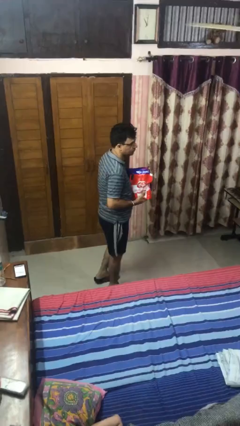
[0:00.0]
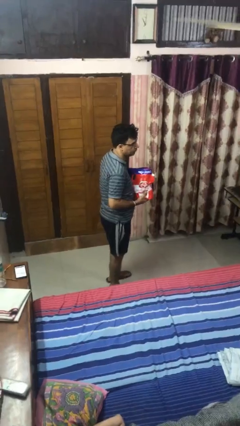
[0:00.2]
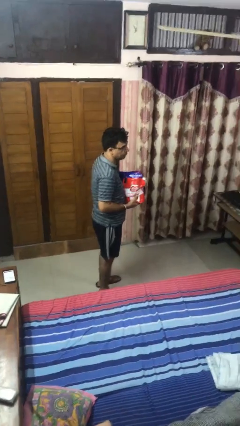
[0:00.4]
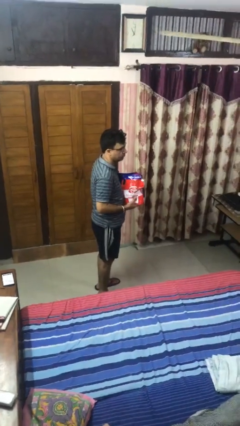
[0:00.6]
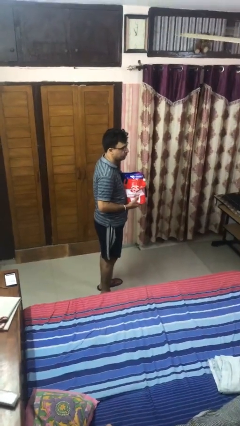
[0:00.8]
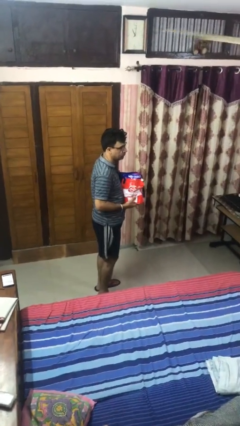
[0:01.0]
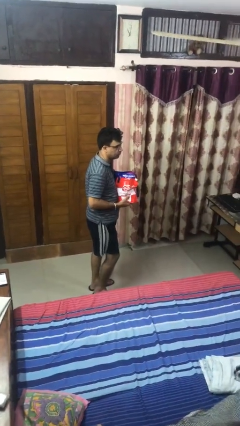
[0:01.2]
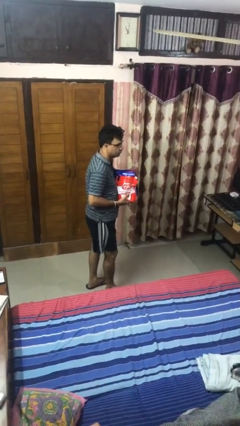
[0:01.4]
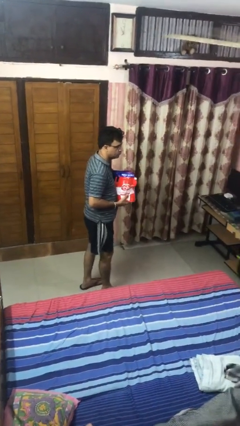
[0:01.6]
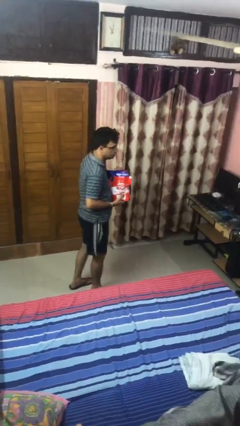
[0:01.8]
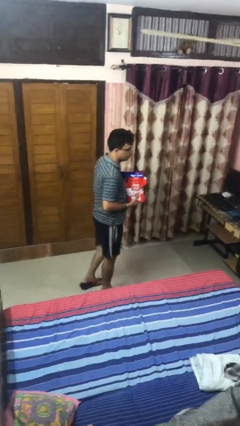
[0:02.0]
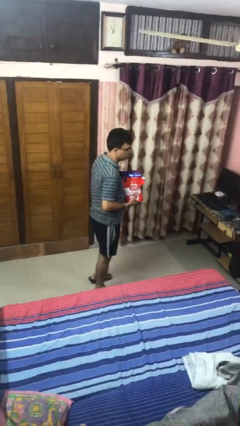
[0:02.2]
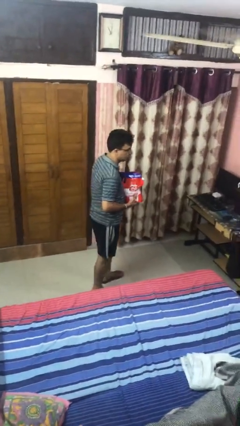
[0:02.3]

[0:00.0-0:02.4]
person carries groceries

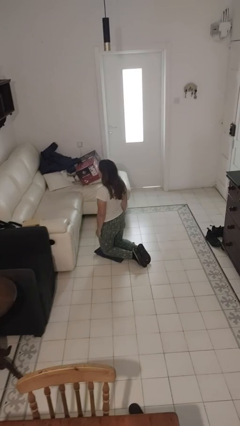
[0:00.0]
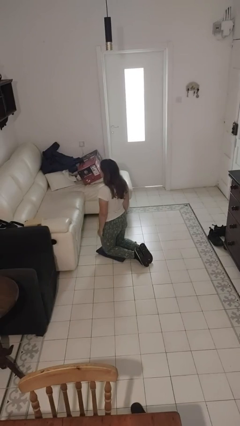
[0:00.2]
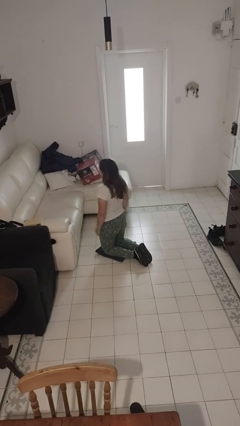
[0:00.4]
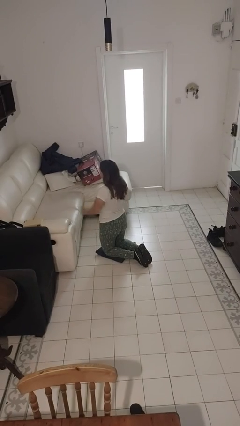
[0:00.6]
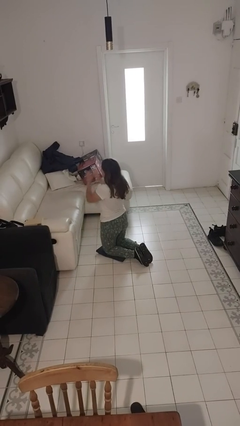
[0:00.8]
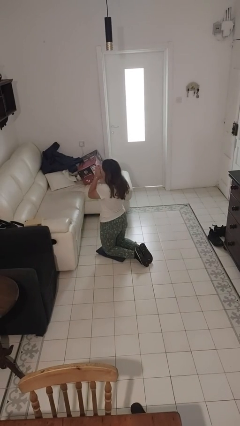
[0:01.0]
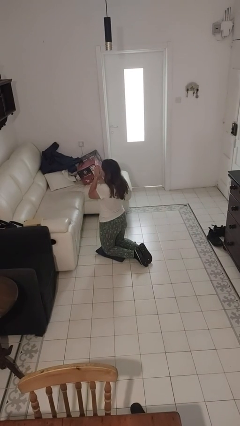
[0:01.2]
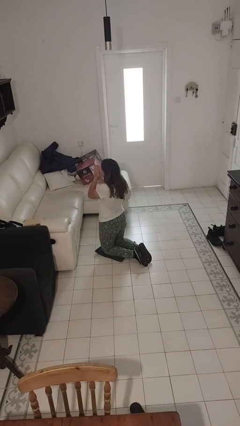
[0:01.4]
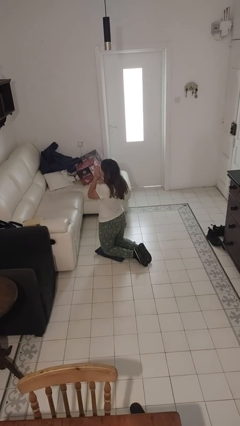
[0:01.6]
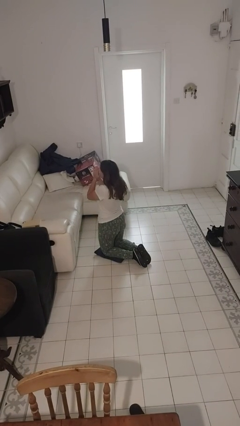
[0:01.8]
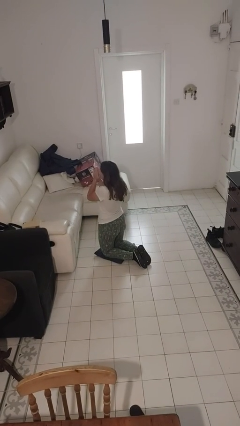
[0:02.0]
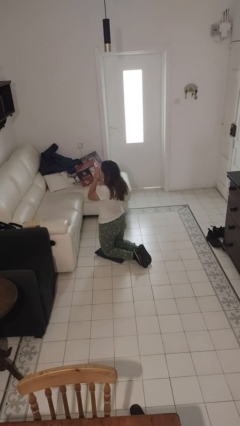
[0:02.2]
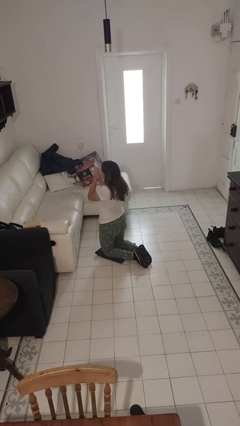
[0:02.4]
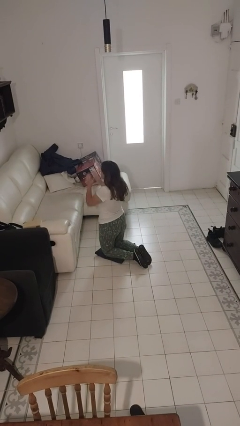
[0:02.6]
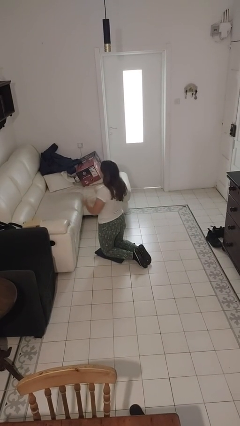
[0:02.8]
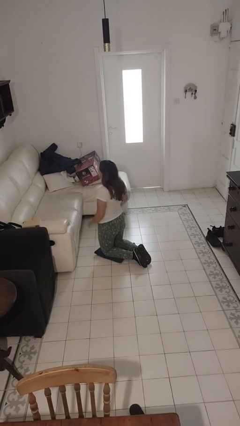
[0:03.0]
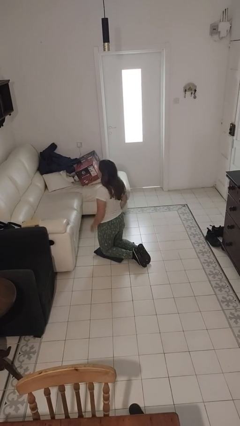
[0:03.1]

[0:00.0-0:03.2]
person prays

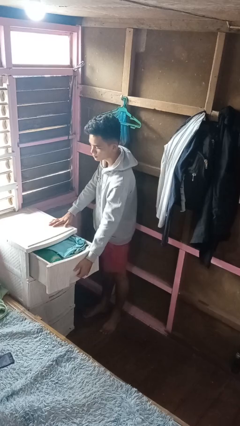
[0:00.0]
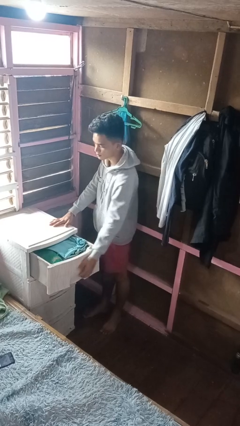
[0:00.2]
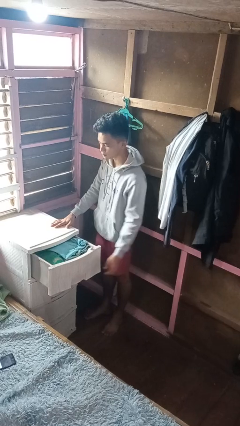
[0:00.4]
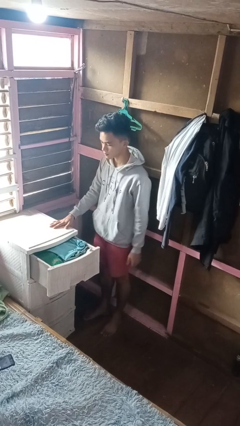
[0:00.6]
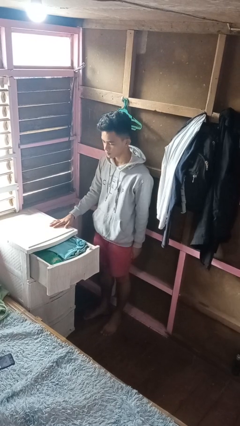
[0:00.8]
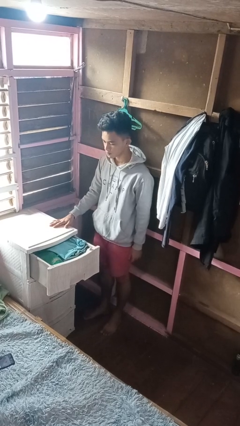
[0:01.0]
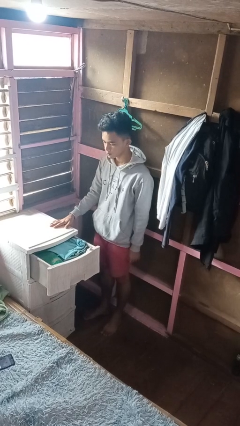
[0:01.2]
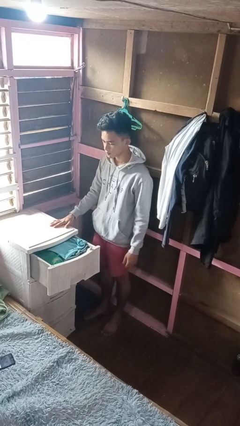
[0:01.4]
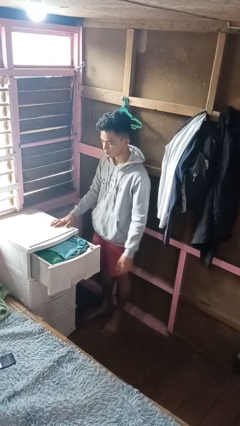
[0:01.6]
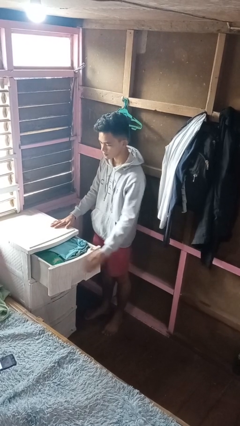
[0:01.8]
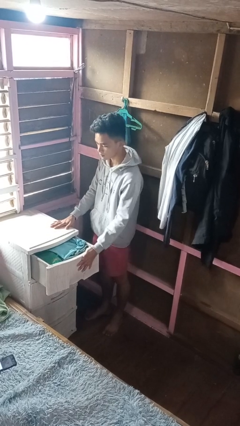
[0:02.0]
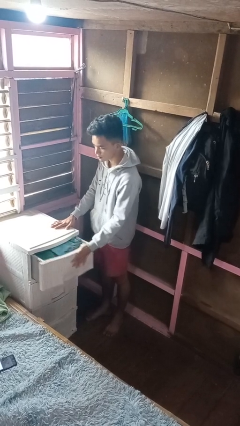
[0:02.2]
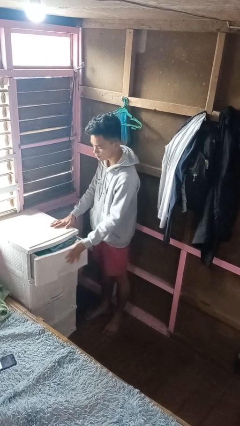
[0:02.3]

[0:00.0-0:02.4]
person opens dresser drawer

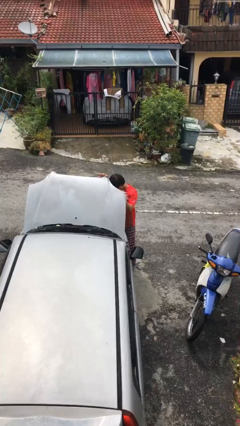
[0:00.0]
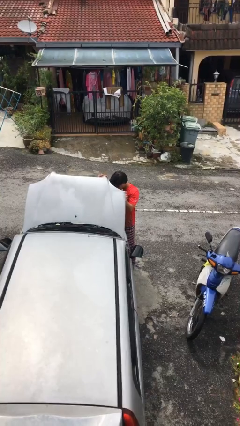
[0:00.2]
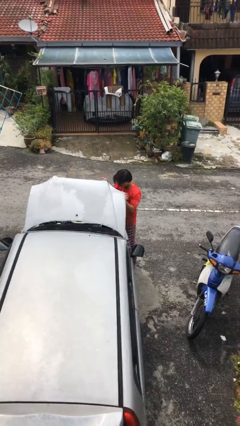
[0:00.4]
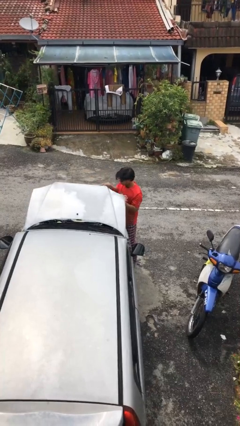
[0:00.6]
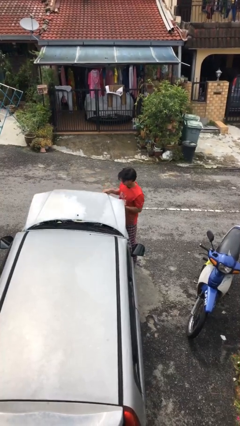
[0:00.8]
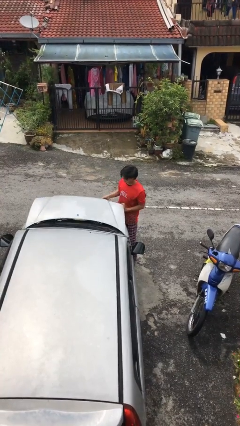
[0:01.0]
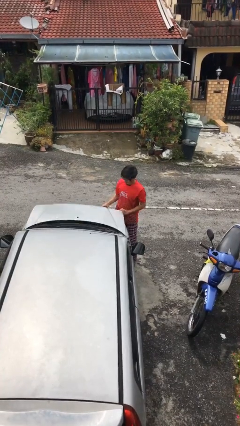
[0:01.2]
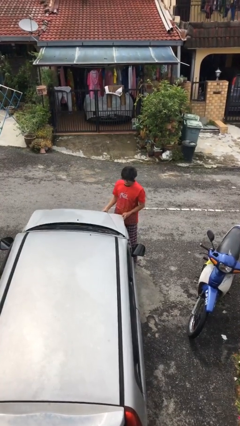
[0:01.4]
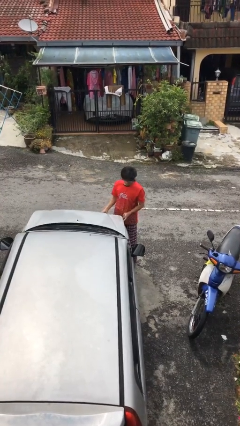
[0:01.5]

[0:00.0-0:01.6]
person closes car hood

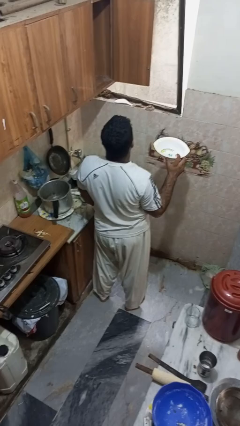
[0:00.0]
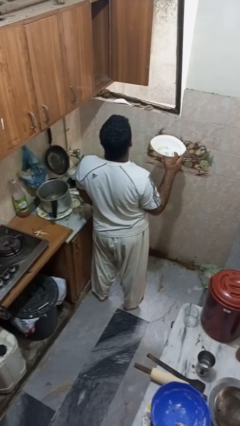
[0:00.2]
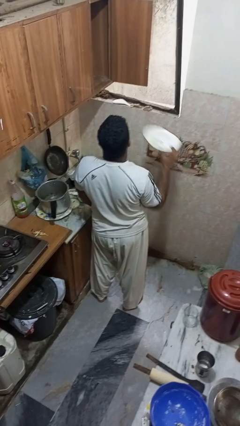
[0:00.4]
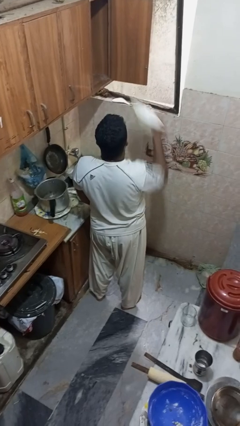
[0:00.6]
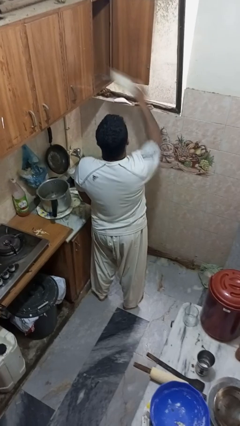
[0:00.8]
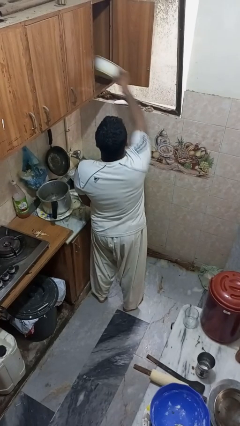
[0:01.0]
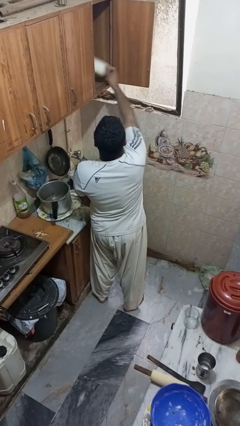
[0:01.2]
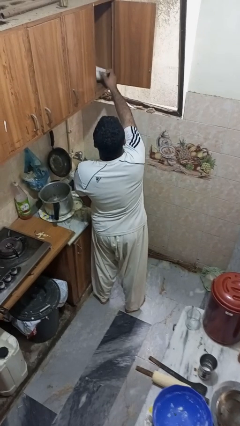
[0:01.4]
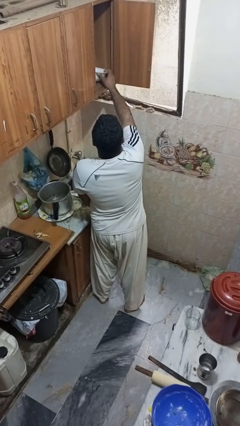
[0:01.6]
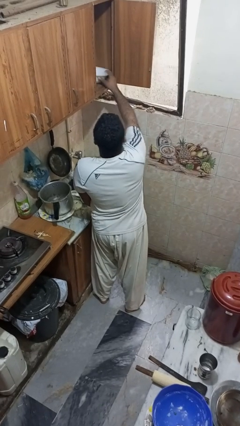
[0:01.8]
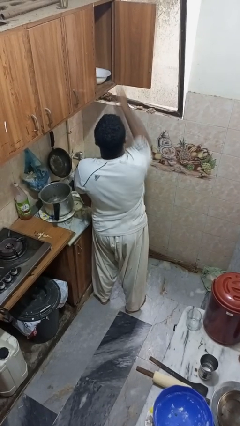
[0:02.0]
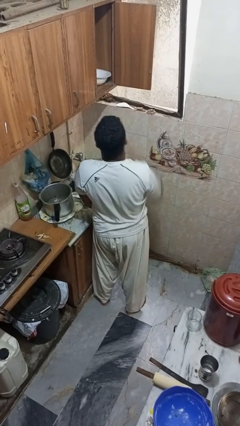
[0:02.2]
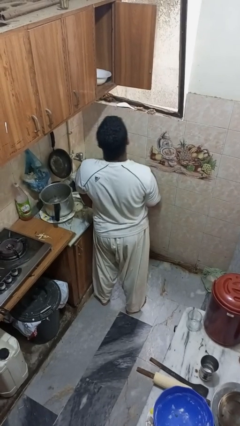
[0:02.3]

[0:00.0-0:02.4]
person puts object in cabinet

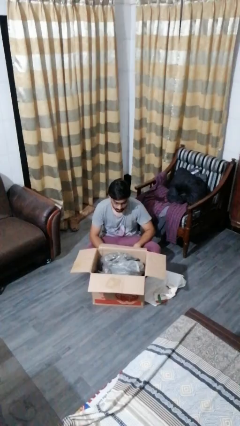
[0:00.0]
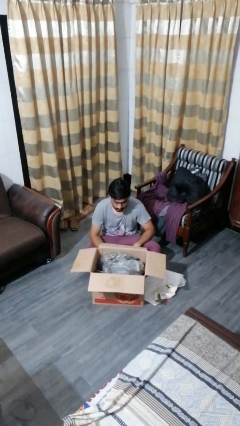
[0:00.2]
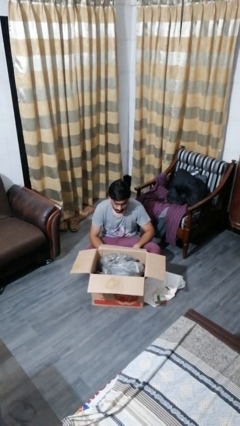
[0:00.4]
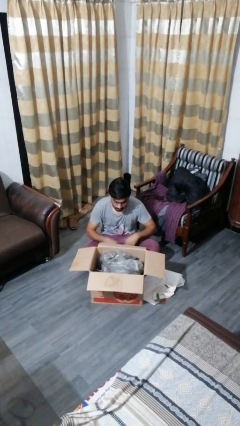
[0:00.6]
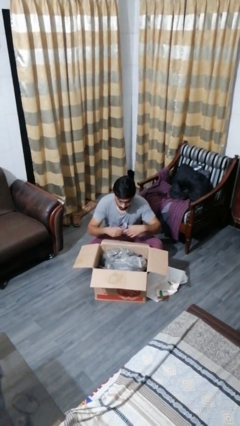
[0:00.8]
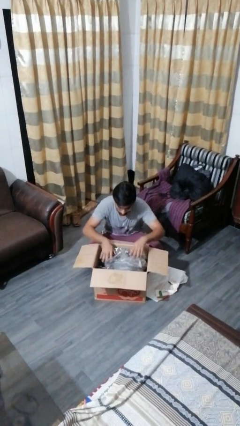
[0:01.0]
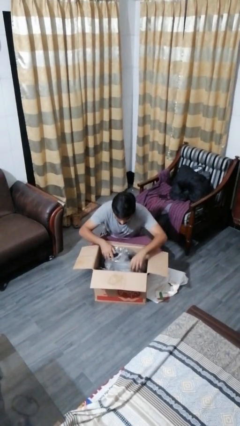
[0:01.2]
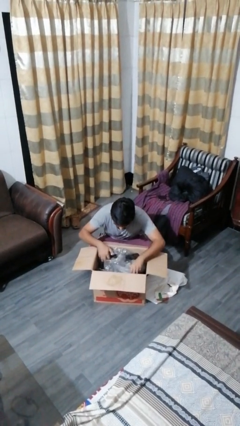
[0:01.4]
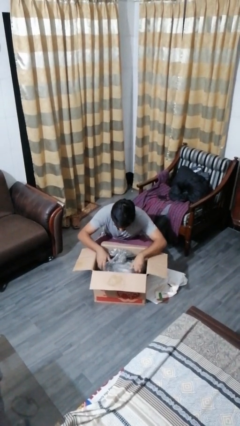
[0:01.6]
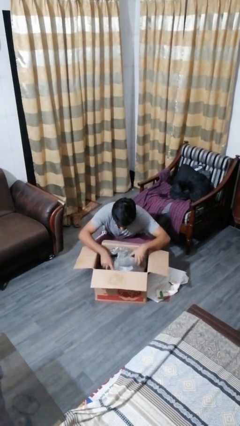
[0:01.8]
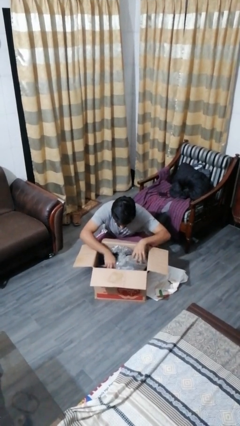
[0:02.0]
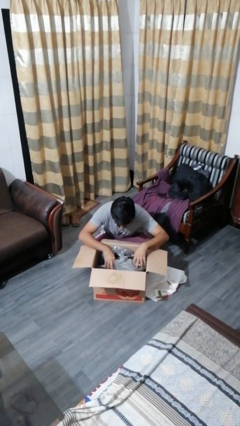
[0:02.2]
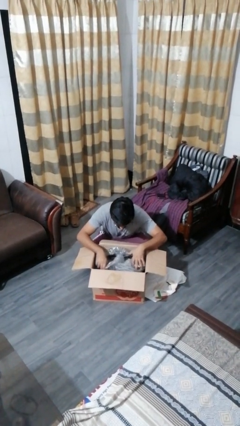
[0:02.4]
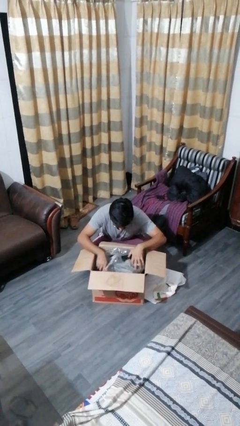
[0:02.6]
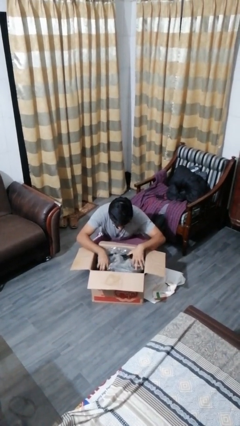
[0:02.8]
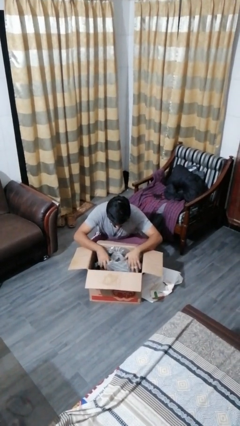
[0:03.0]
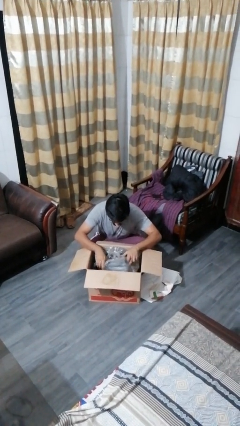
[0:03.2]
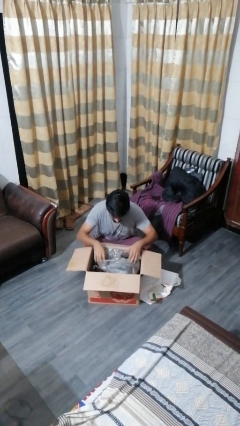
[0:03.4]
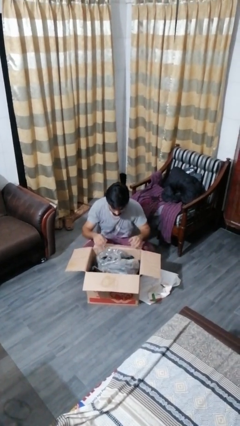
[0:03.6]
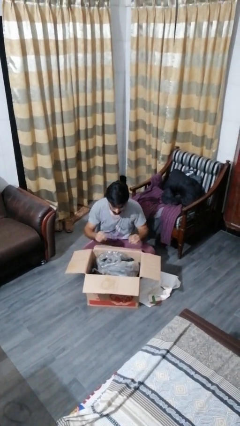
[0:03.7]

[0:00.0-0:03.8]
person searches in box

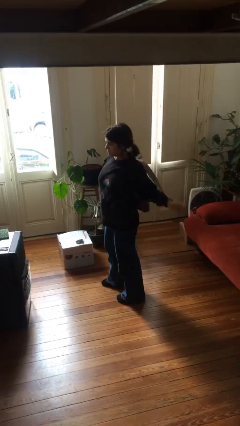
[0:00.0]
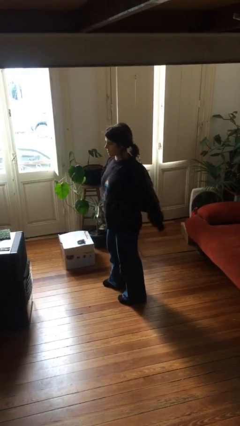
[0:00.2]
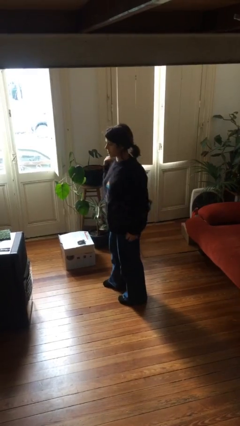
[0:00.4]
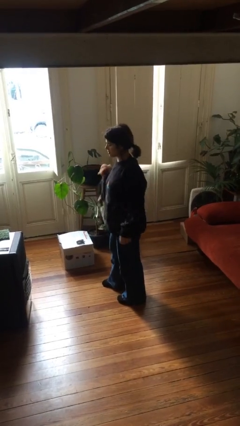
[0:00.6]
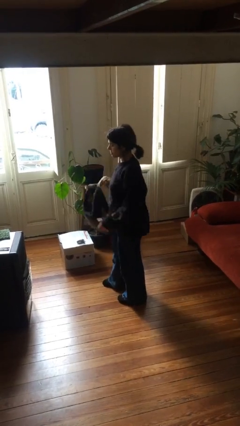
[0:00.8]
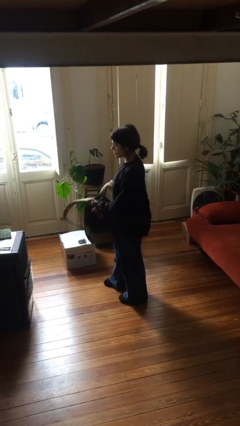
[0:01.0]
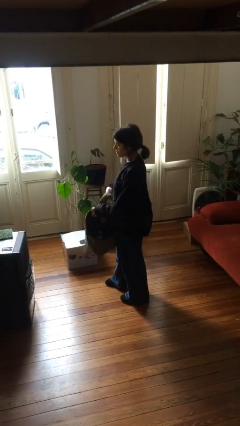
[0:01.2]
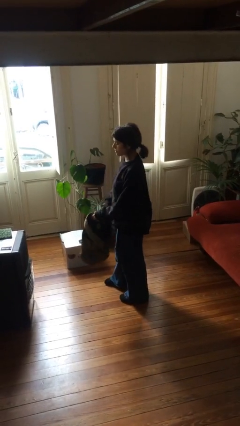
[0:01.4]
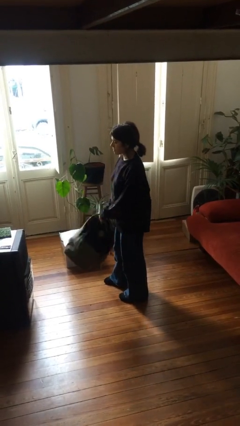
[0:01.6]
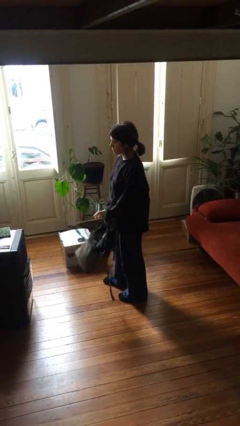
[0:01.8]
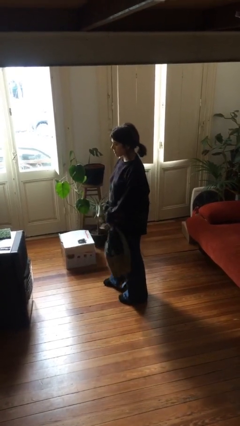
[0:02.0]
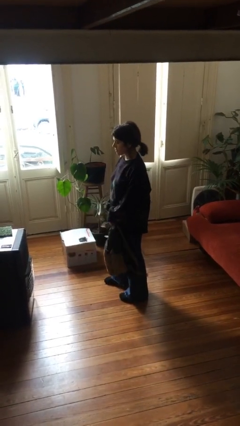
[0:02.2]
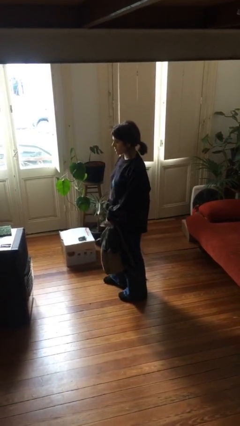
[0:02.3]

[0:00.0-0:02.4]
person takes off backpack
